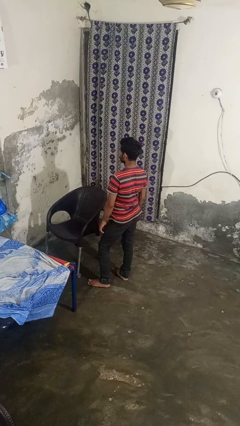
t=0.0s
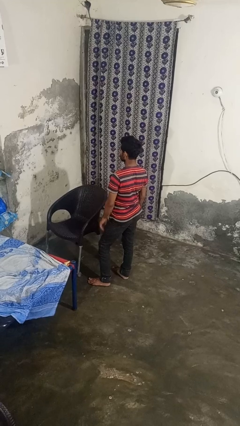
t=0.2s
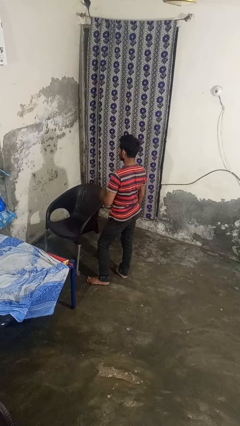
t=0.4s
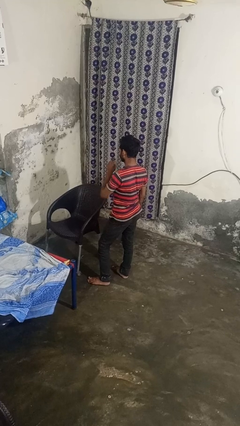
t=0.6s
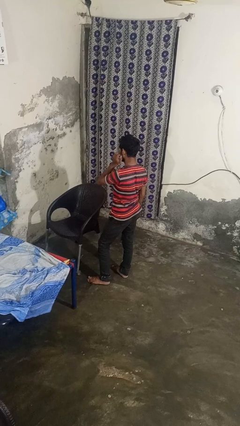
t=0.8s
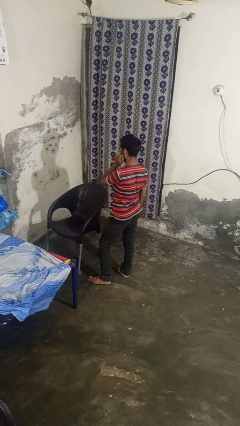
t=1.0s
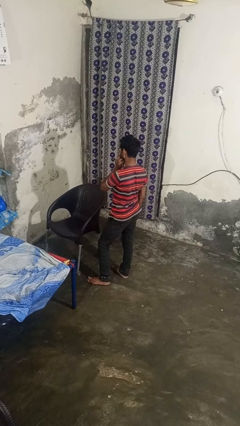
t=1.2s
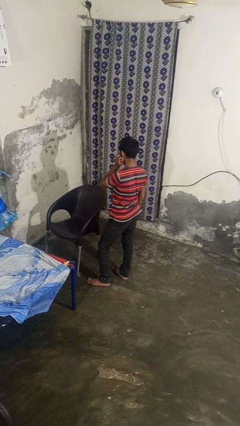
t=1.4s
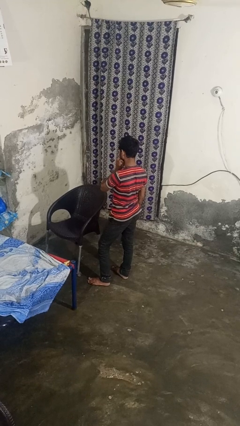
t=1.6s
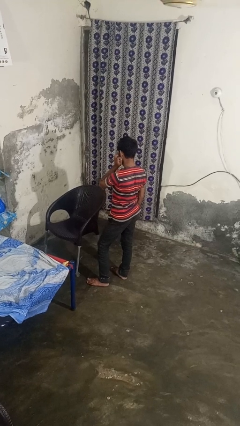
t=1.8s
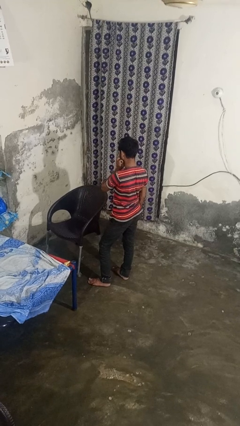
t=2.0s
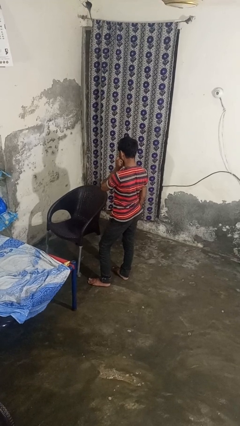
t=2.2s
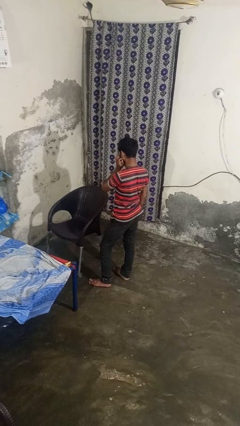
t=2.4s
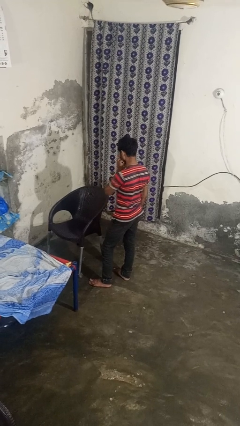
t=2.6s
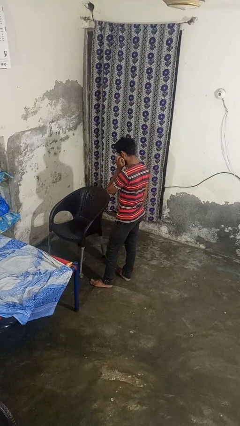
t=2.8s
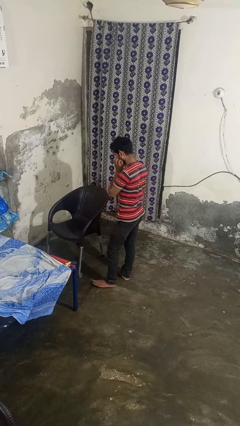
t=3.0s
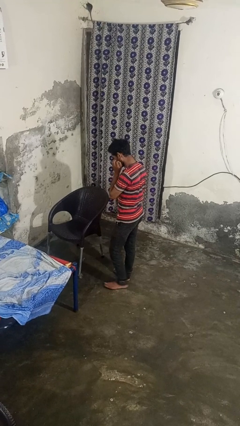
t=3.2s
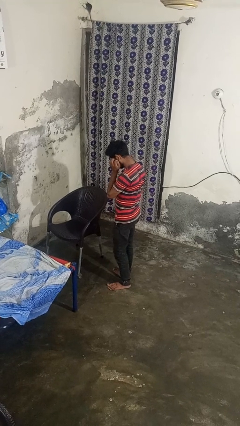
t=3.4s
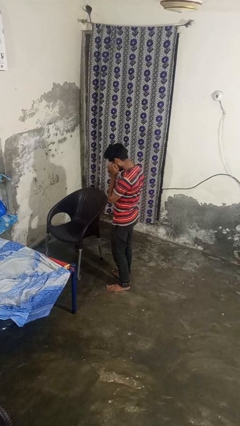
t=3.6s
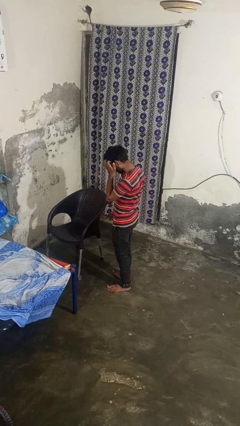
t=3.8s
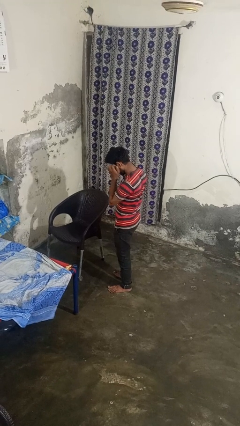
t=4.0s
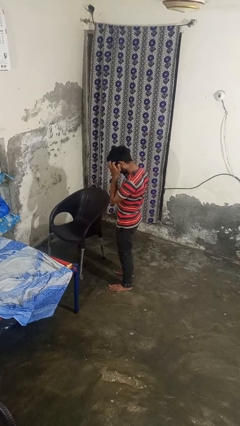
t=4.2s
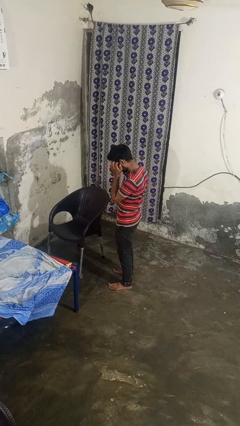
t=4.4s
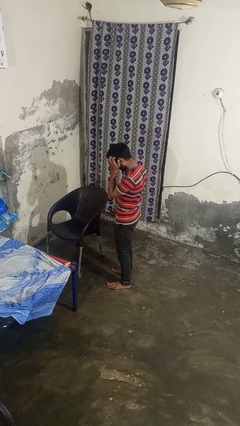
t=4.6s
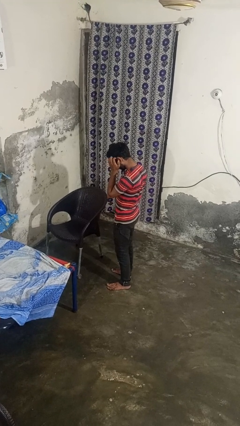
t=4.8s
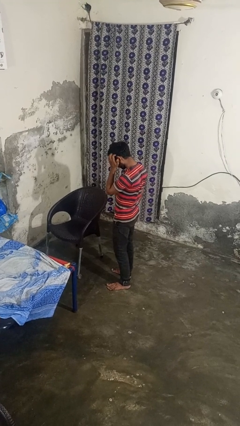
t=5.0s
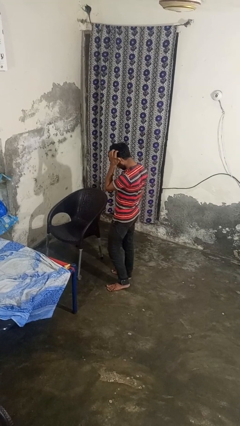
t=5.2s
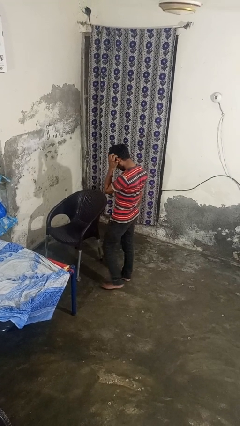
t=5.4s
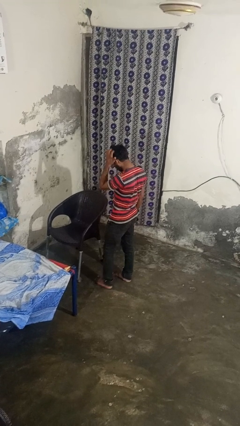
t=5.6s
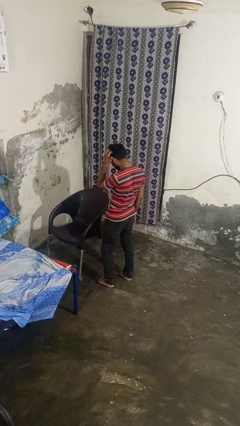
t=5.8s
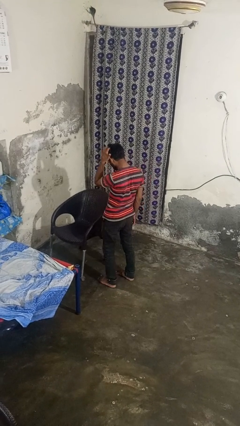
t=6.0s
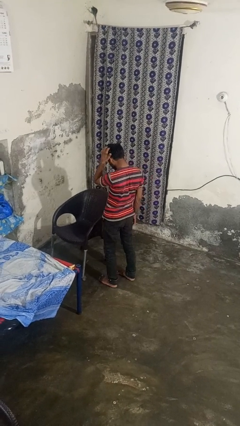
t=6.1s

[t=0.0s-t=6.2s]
person scratches face

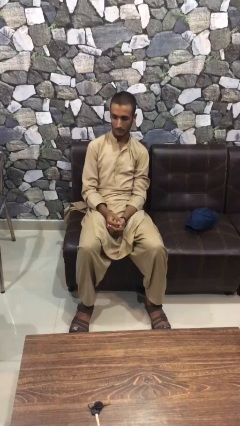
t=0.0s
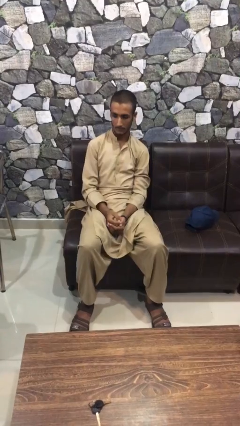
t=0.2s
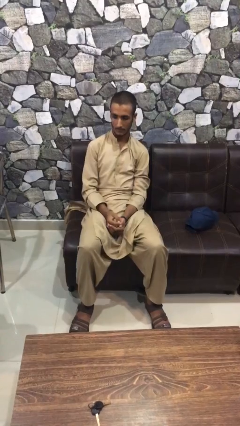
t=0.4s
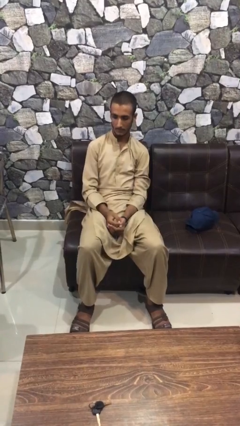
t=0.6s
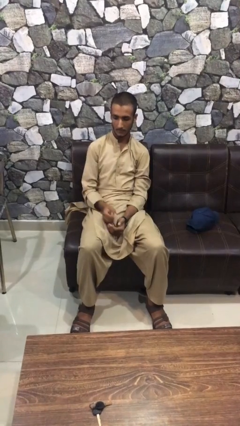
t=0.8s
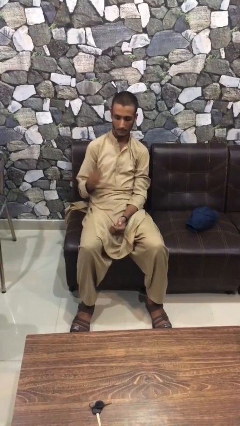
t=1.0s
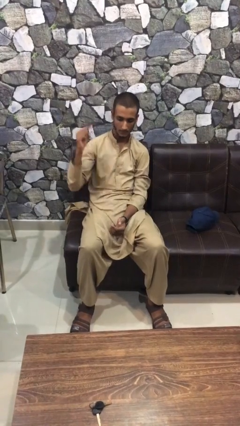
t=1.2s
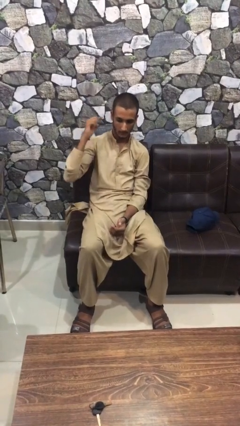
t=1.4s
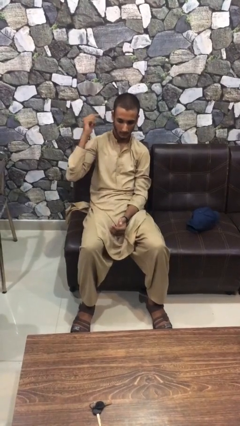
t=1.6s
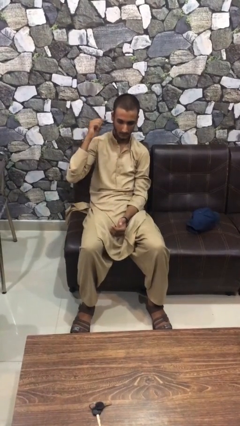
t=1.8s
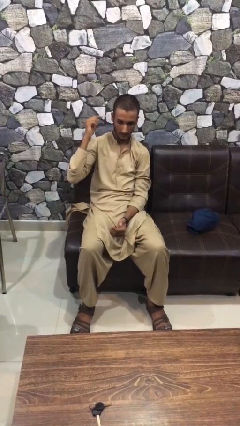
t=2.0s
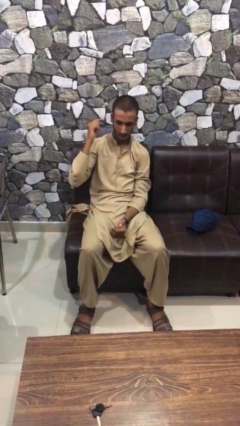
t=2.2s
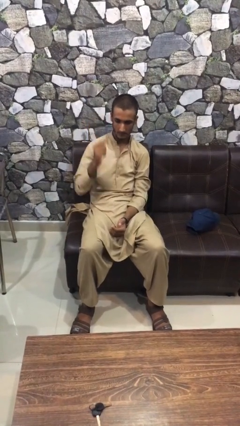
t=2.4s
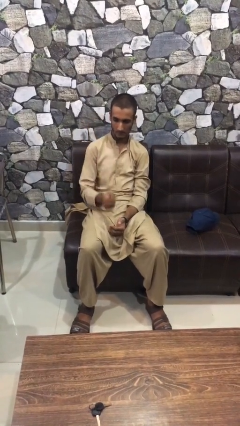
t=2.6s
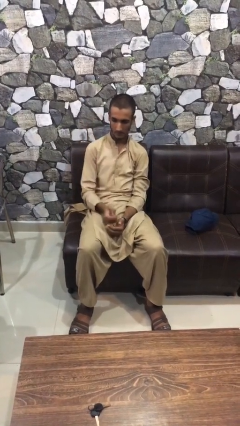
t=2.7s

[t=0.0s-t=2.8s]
person gestures listen closely

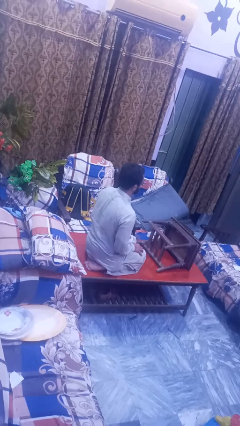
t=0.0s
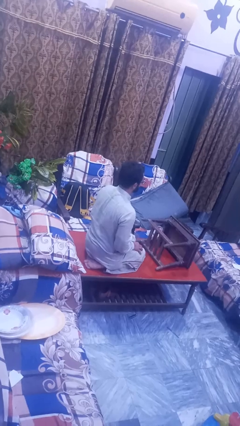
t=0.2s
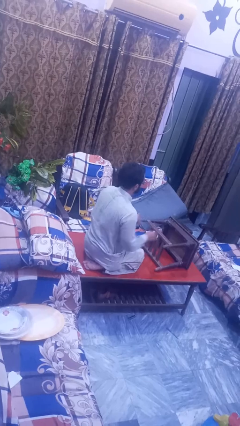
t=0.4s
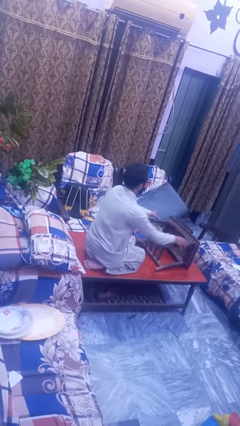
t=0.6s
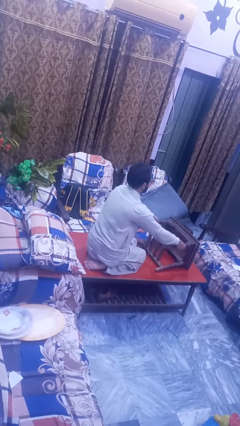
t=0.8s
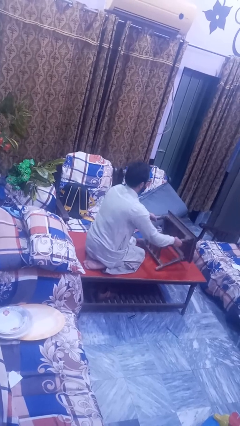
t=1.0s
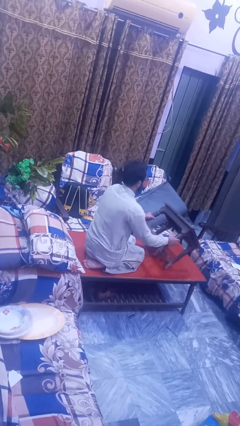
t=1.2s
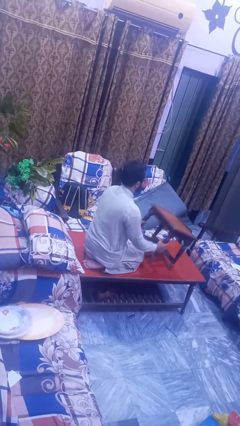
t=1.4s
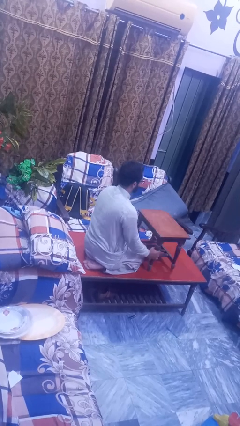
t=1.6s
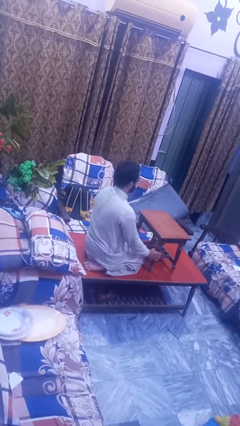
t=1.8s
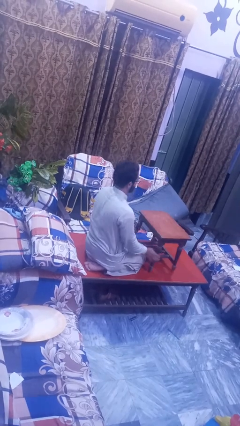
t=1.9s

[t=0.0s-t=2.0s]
person sets upright furniture

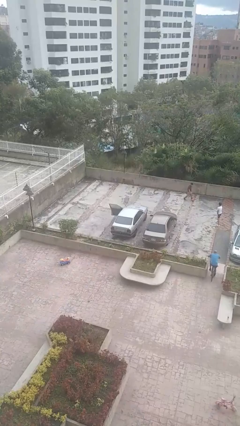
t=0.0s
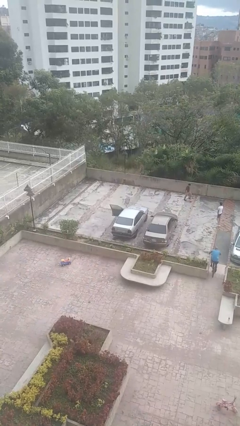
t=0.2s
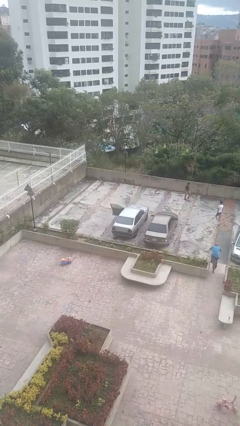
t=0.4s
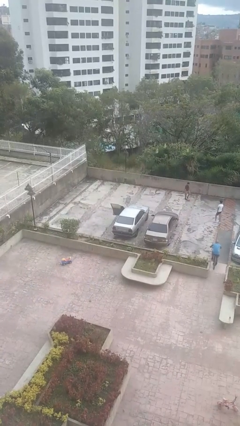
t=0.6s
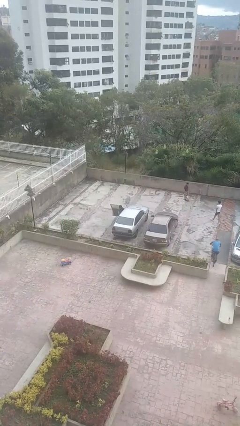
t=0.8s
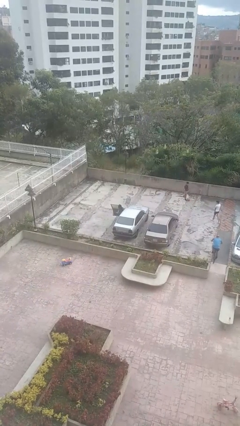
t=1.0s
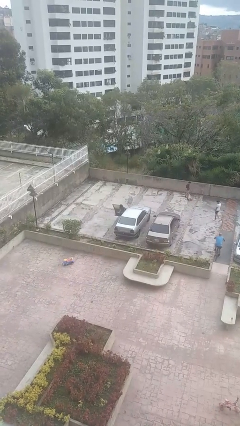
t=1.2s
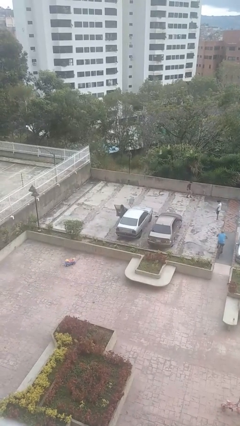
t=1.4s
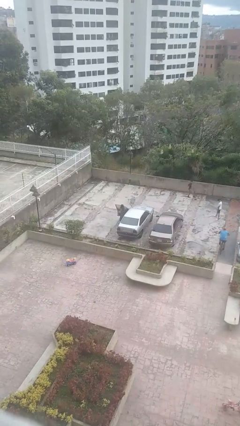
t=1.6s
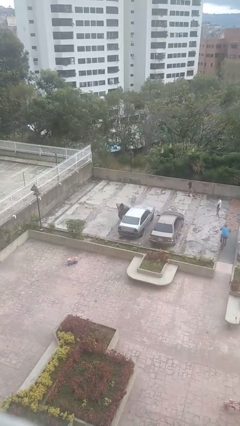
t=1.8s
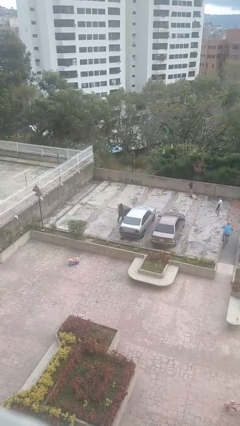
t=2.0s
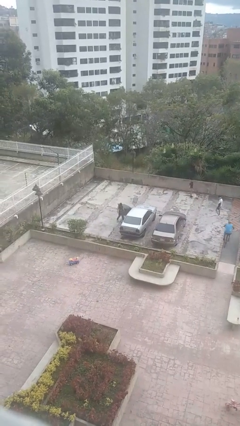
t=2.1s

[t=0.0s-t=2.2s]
person exits car

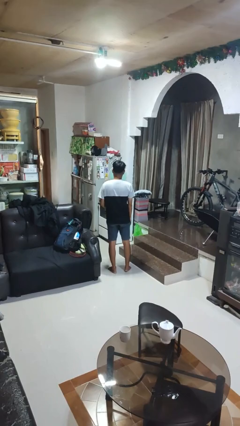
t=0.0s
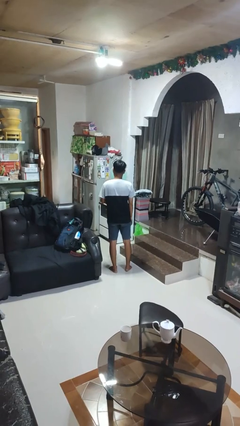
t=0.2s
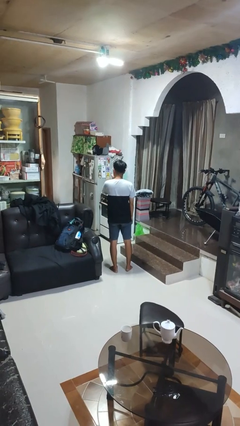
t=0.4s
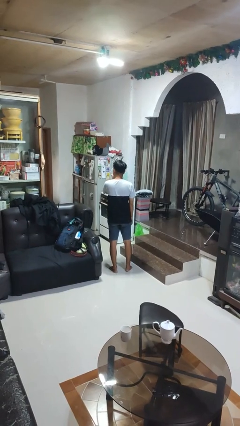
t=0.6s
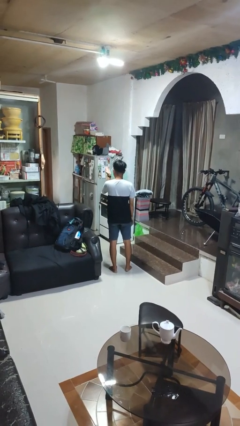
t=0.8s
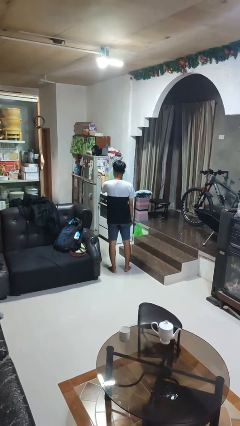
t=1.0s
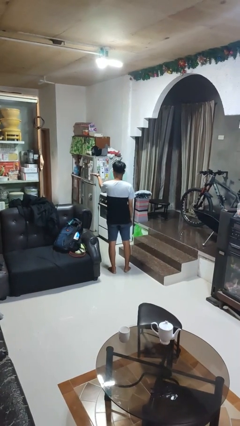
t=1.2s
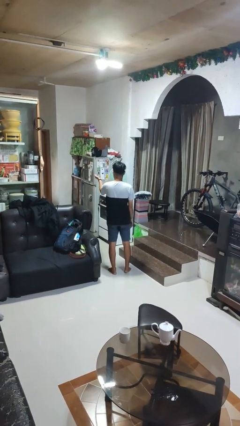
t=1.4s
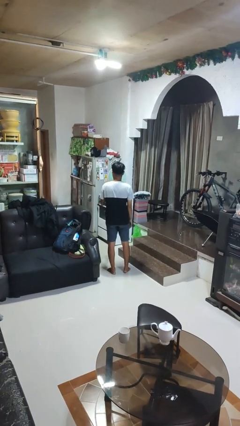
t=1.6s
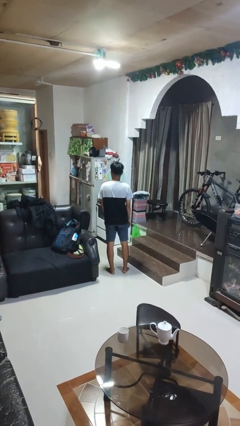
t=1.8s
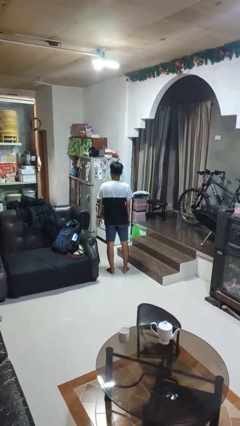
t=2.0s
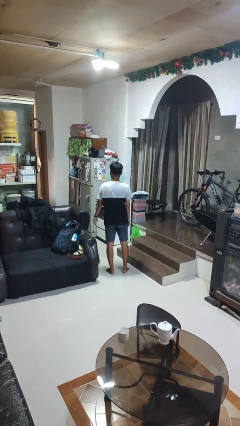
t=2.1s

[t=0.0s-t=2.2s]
person gestures blow kiss

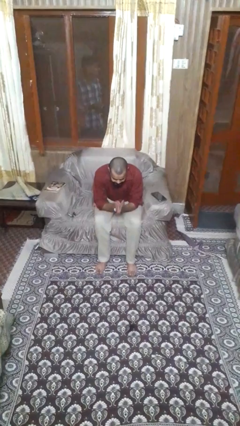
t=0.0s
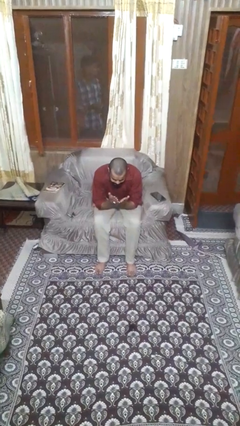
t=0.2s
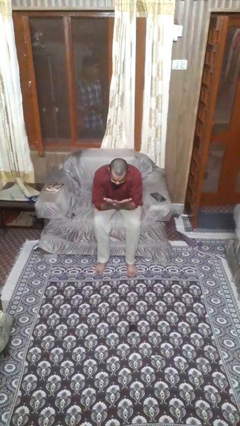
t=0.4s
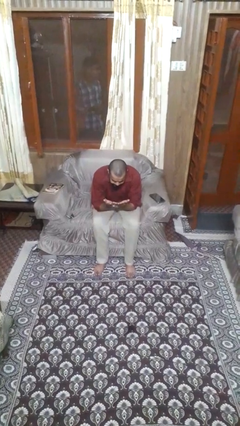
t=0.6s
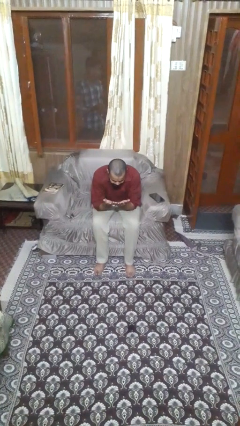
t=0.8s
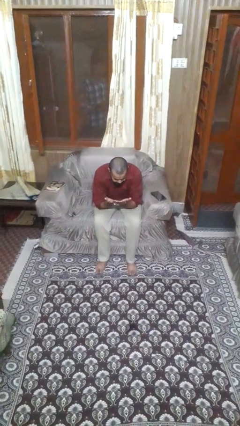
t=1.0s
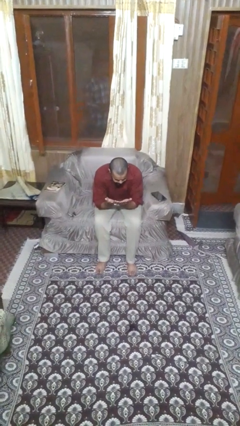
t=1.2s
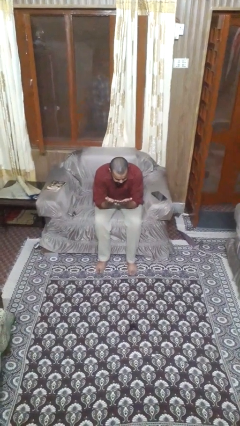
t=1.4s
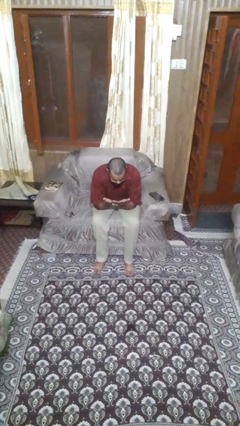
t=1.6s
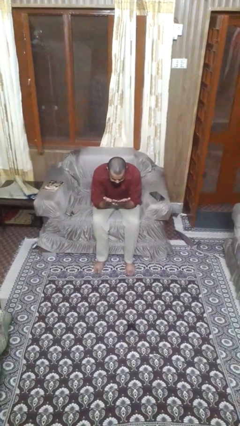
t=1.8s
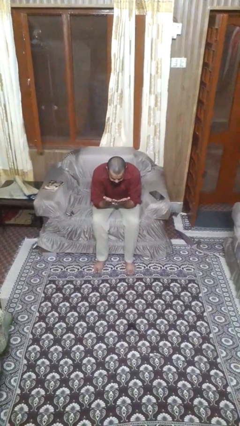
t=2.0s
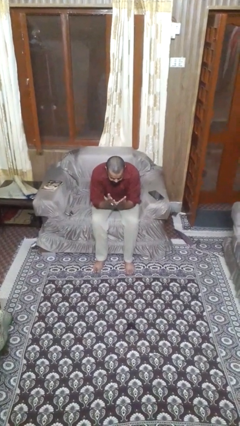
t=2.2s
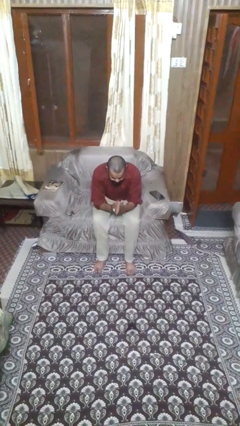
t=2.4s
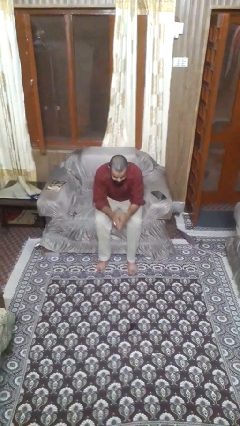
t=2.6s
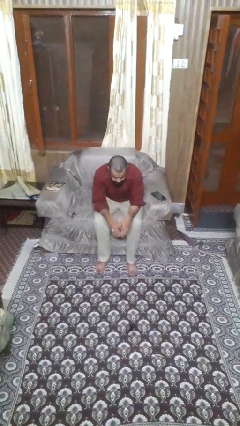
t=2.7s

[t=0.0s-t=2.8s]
person looks at hands in lap
